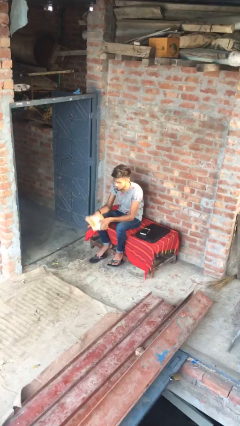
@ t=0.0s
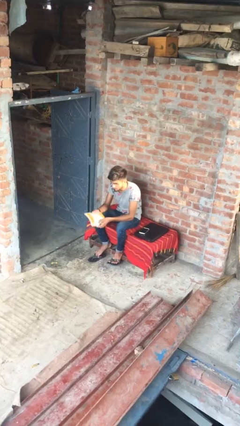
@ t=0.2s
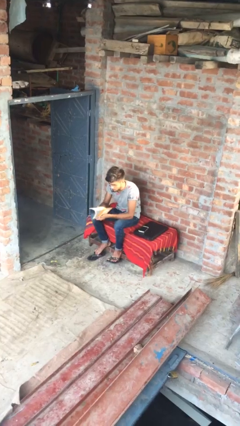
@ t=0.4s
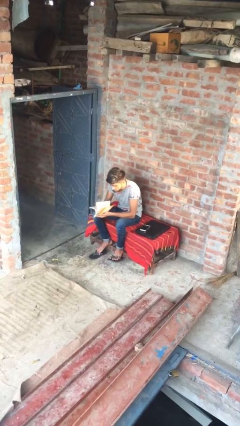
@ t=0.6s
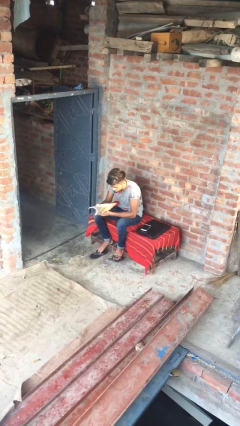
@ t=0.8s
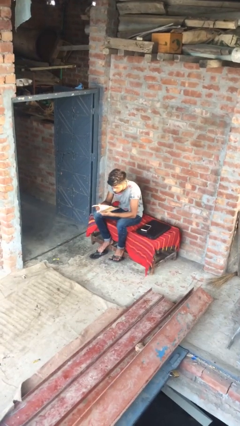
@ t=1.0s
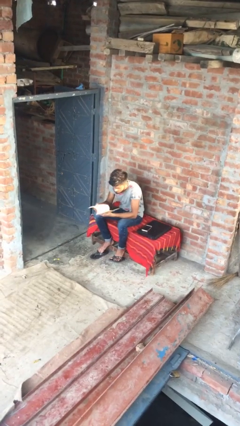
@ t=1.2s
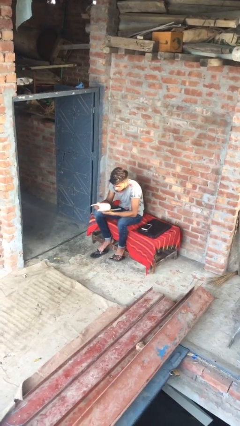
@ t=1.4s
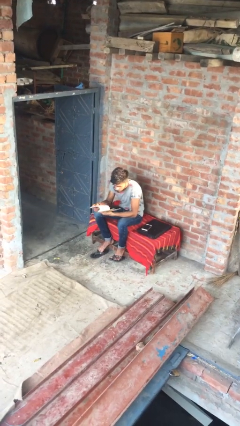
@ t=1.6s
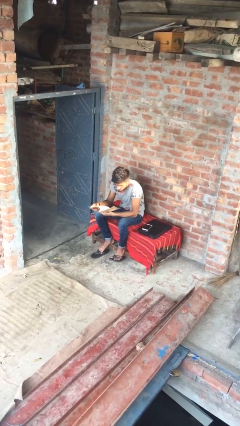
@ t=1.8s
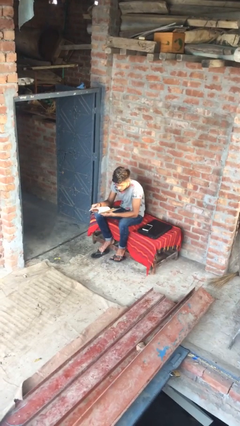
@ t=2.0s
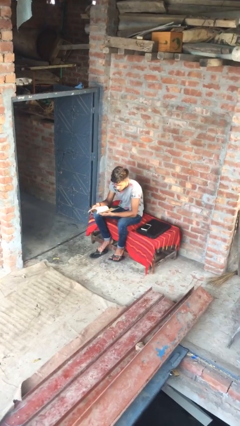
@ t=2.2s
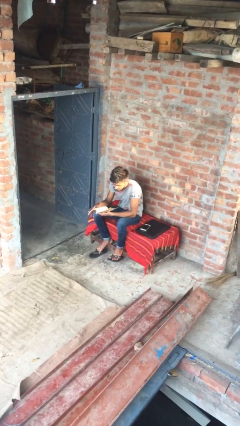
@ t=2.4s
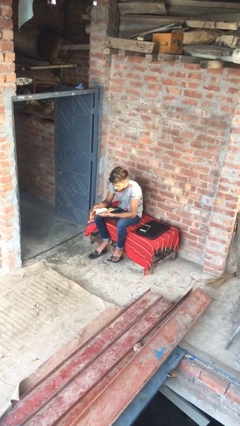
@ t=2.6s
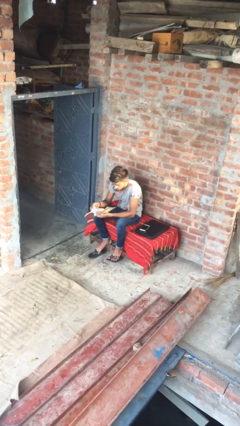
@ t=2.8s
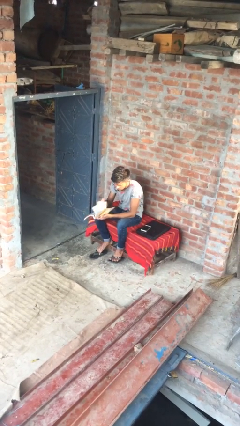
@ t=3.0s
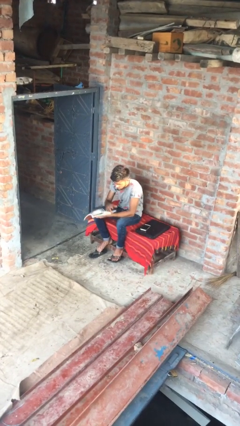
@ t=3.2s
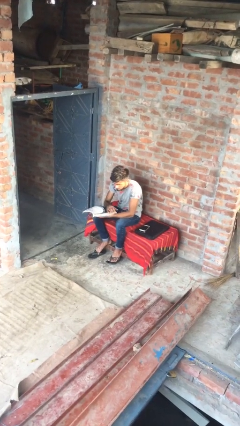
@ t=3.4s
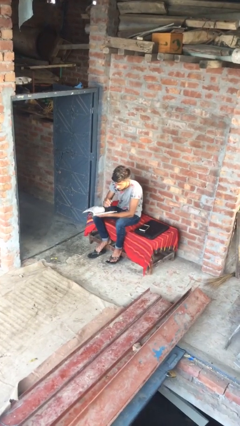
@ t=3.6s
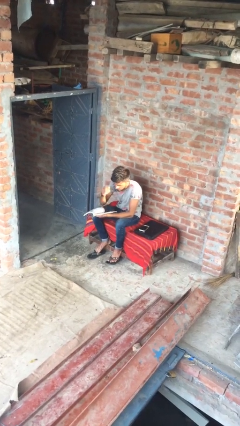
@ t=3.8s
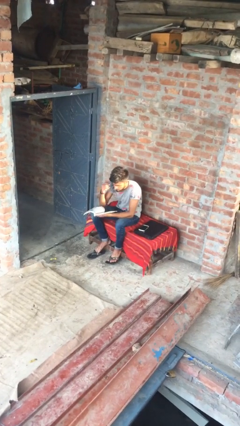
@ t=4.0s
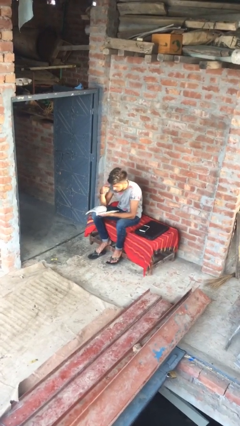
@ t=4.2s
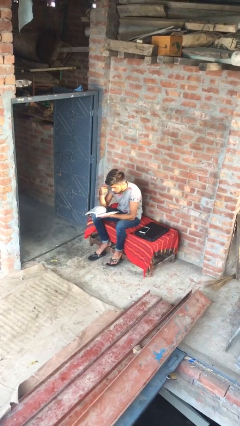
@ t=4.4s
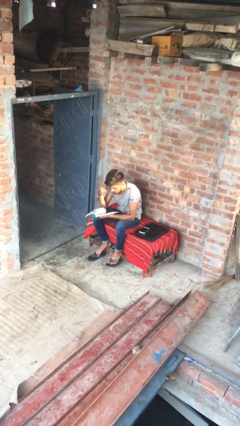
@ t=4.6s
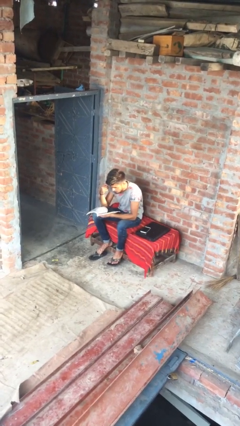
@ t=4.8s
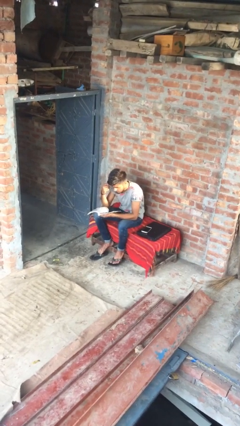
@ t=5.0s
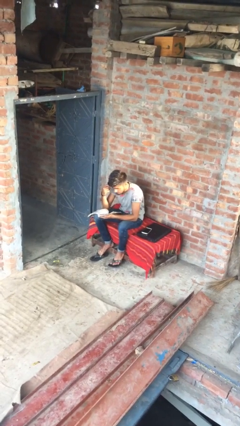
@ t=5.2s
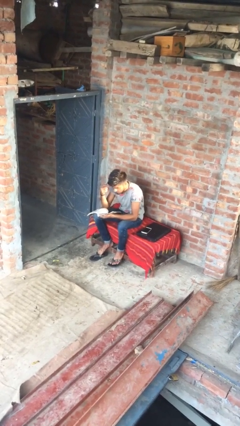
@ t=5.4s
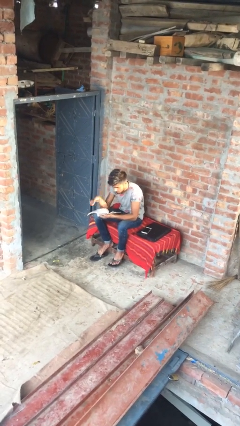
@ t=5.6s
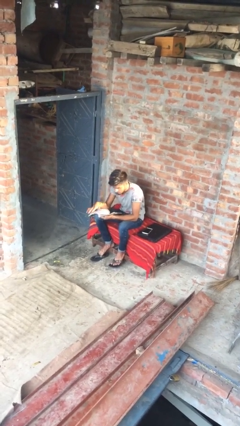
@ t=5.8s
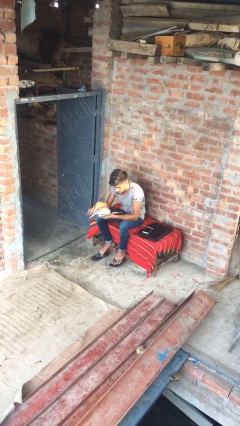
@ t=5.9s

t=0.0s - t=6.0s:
person reads document

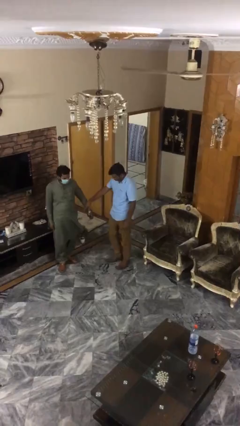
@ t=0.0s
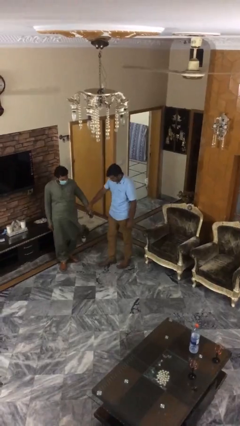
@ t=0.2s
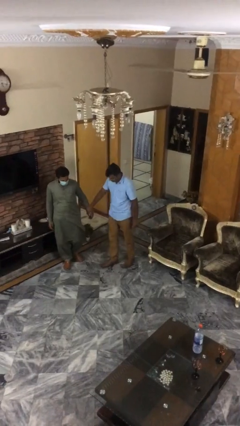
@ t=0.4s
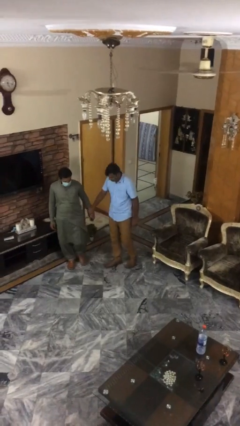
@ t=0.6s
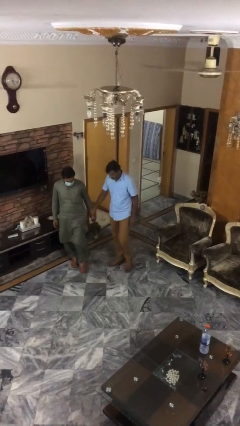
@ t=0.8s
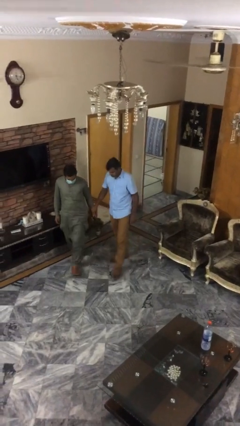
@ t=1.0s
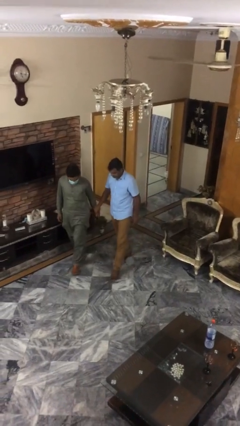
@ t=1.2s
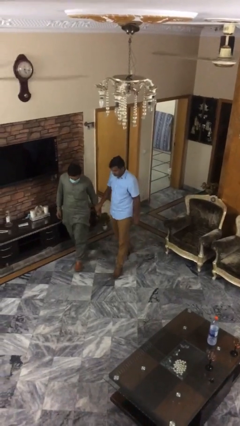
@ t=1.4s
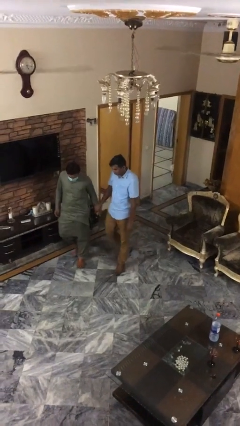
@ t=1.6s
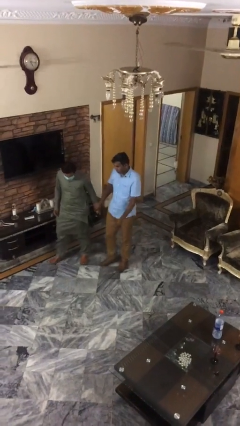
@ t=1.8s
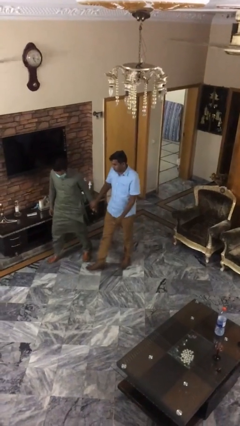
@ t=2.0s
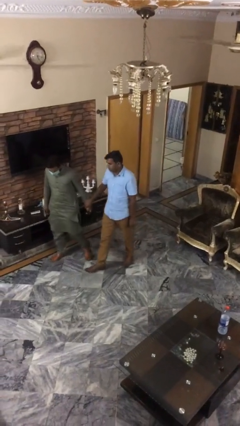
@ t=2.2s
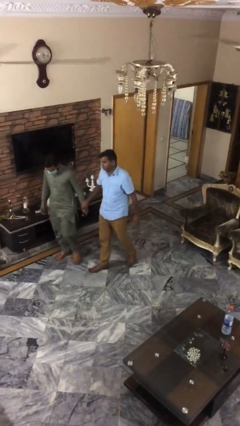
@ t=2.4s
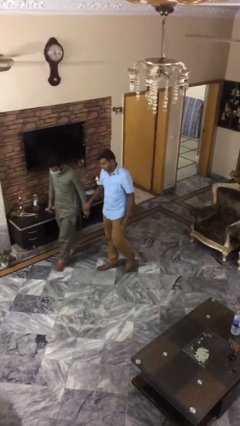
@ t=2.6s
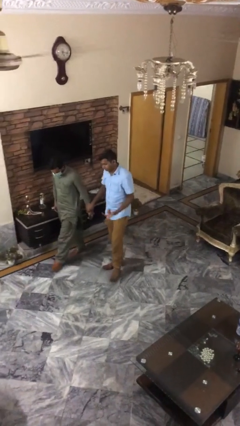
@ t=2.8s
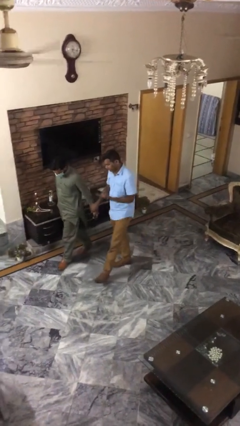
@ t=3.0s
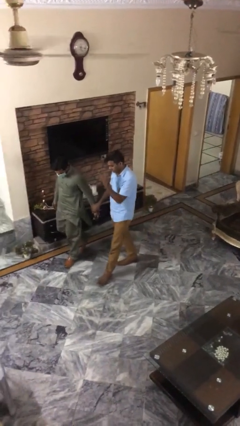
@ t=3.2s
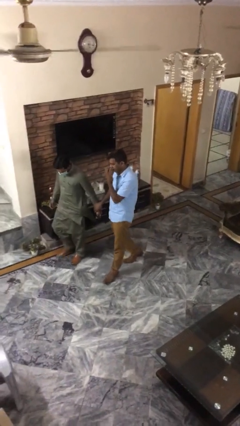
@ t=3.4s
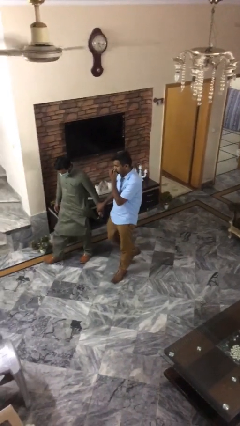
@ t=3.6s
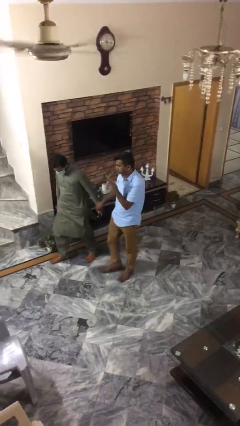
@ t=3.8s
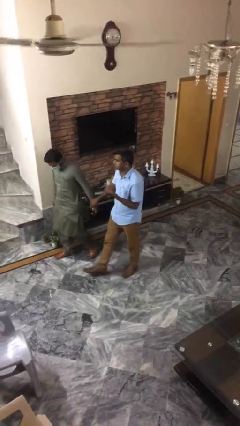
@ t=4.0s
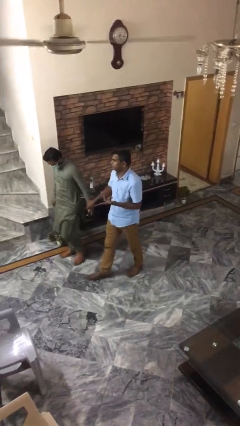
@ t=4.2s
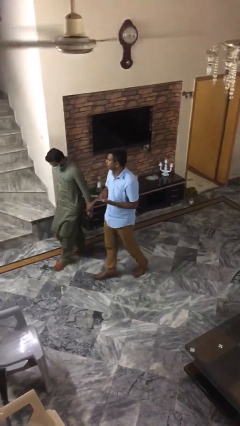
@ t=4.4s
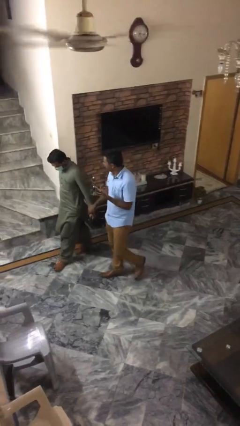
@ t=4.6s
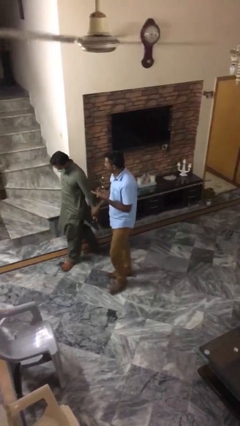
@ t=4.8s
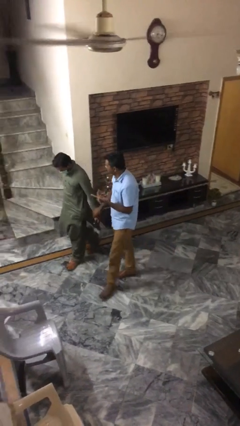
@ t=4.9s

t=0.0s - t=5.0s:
person holds hand

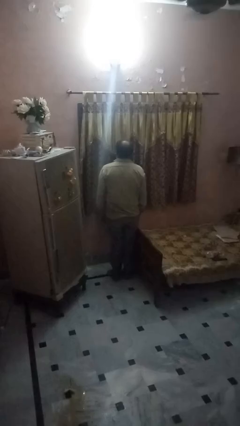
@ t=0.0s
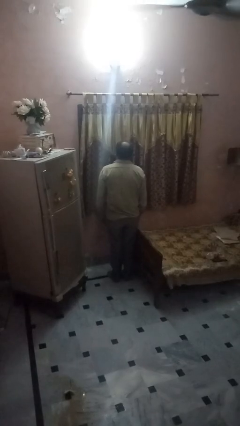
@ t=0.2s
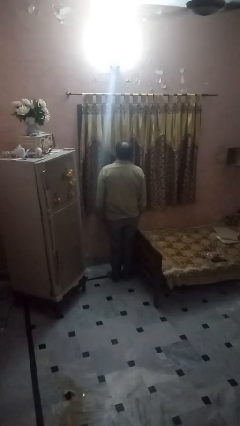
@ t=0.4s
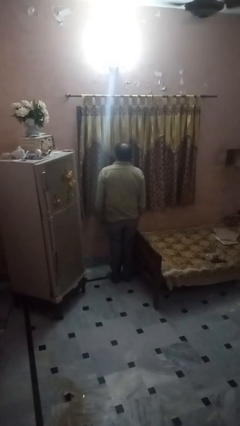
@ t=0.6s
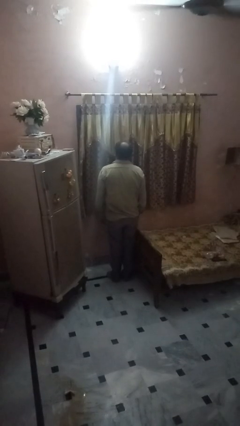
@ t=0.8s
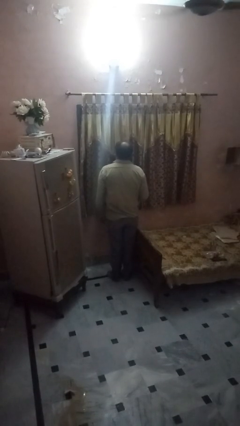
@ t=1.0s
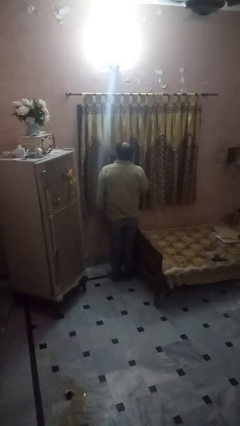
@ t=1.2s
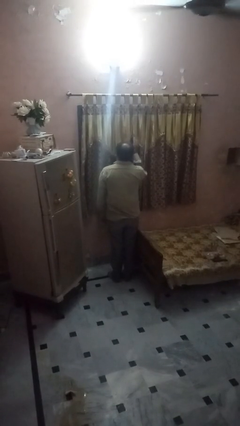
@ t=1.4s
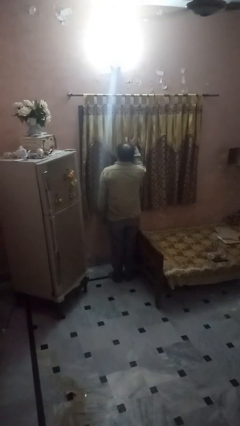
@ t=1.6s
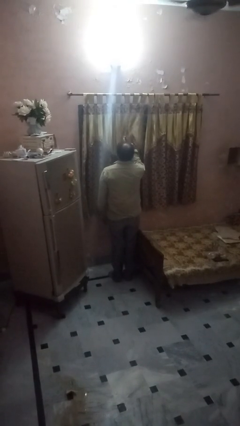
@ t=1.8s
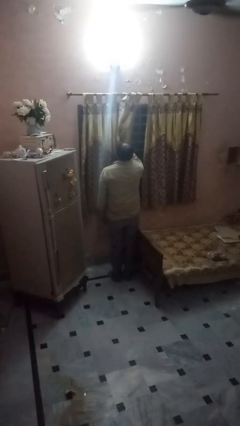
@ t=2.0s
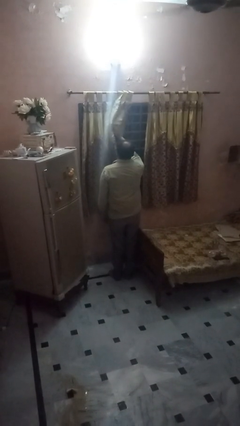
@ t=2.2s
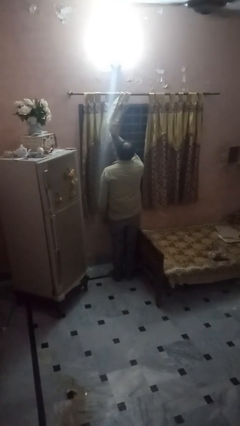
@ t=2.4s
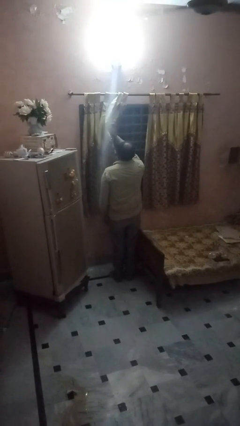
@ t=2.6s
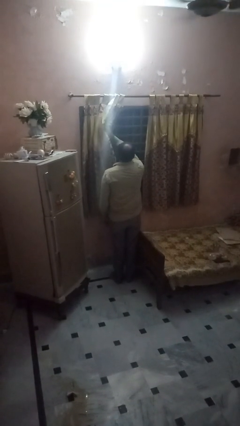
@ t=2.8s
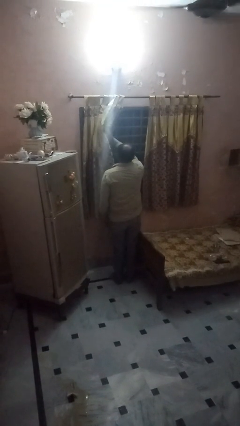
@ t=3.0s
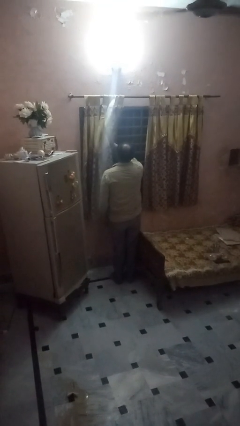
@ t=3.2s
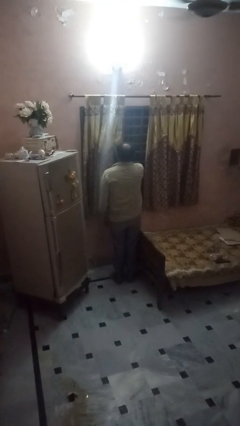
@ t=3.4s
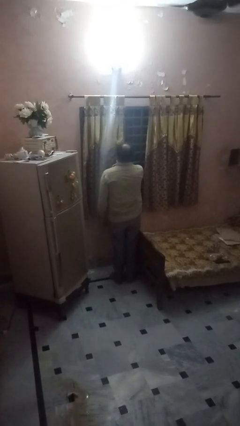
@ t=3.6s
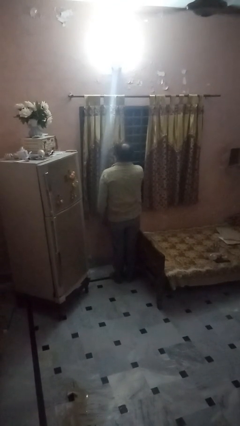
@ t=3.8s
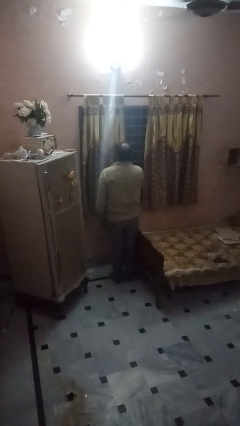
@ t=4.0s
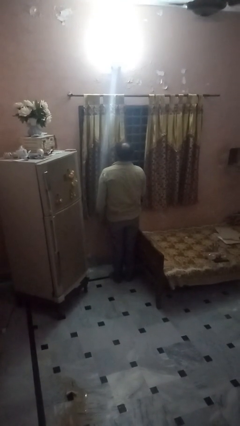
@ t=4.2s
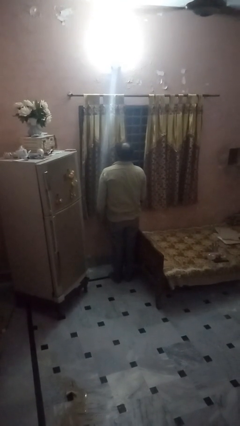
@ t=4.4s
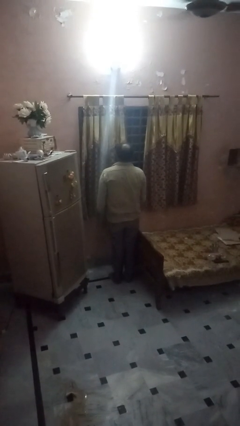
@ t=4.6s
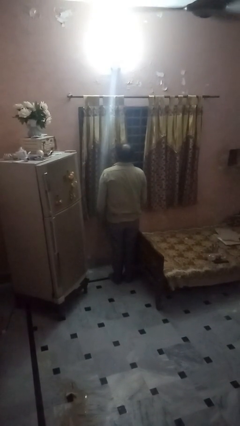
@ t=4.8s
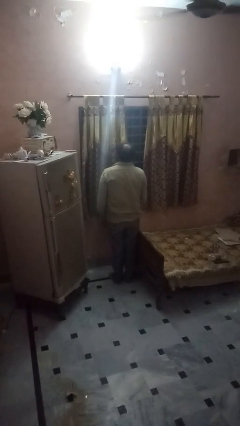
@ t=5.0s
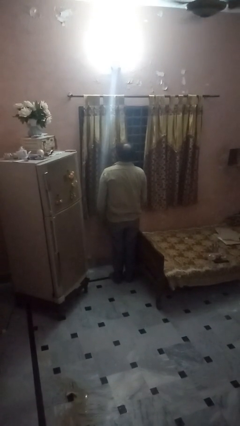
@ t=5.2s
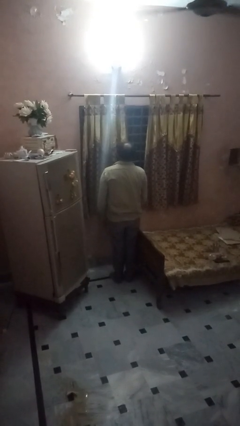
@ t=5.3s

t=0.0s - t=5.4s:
person opens curtains

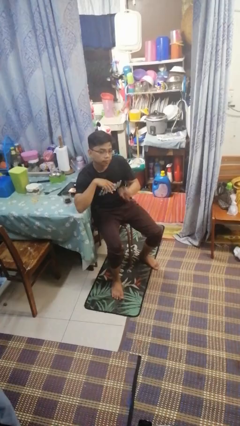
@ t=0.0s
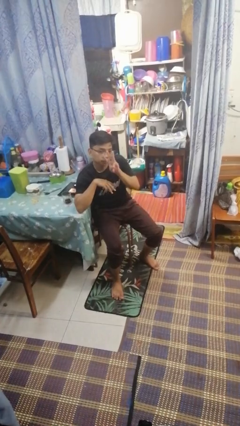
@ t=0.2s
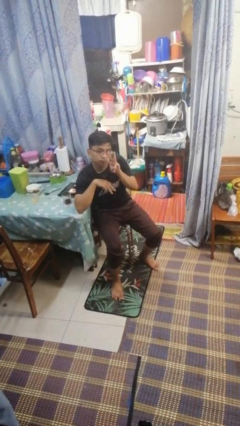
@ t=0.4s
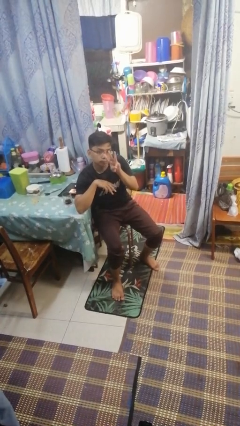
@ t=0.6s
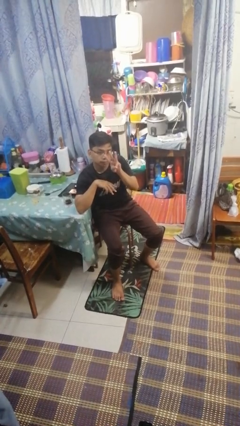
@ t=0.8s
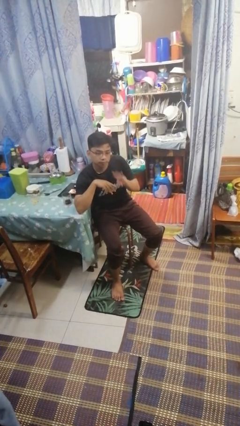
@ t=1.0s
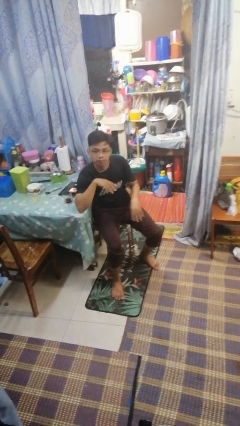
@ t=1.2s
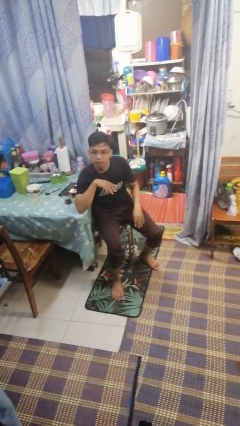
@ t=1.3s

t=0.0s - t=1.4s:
person gestures number three
